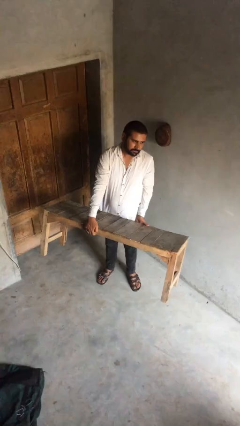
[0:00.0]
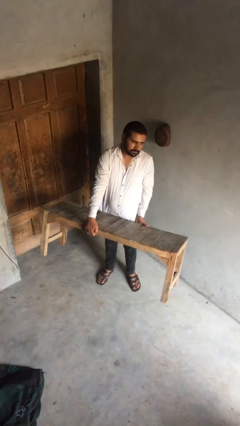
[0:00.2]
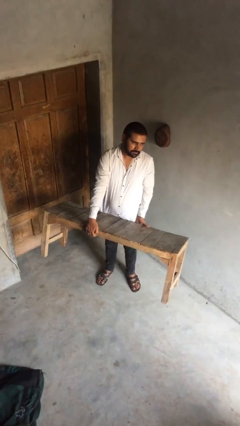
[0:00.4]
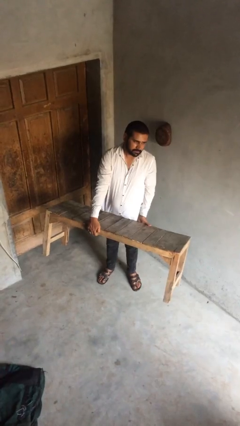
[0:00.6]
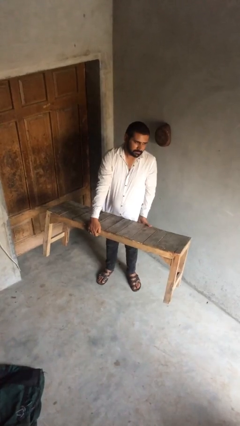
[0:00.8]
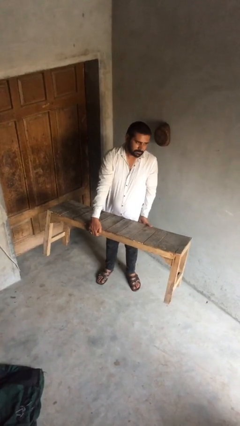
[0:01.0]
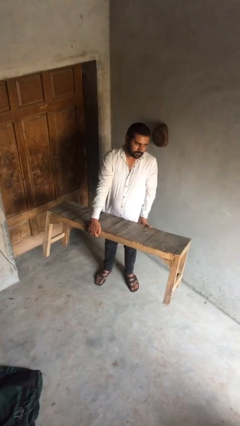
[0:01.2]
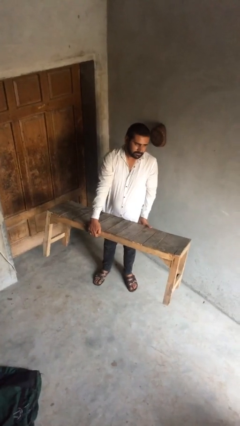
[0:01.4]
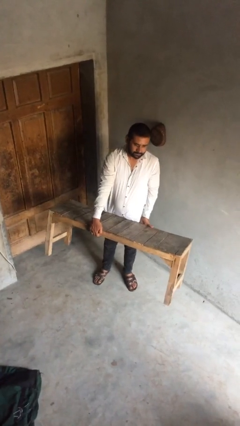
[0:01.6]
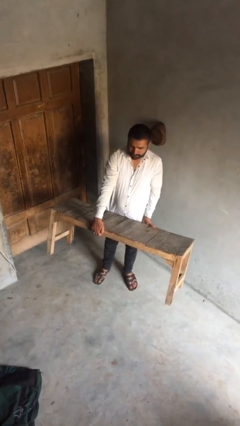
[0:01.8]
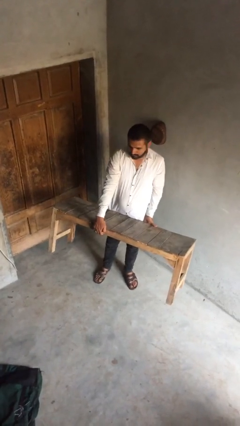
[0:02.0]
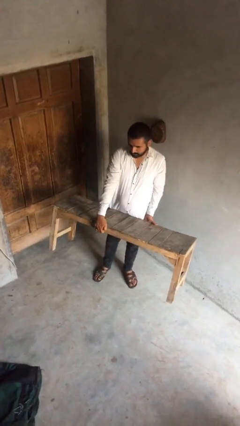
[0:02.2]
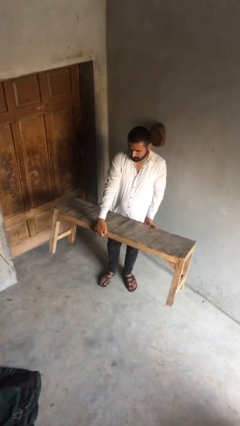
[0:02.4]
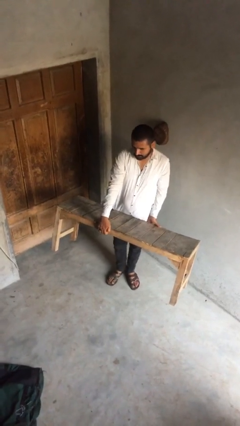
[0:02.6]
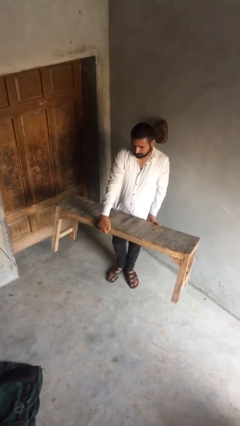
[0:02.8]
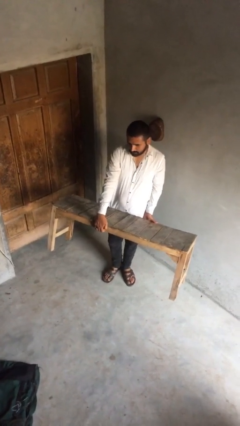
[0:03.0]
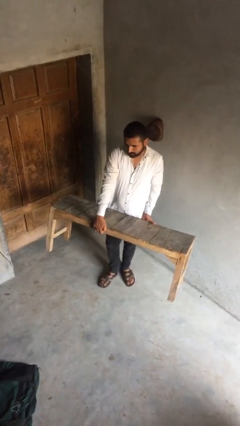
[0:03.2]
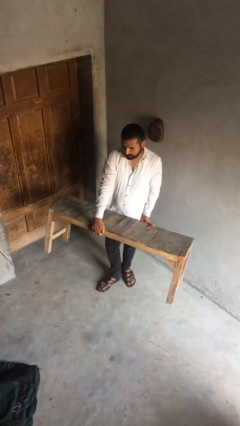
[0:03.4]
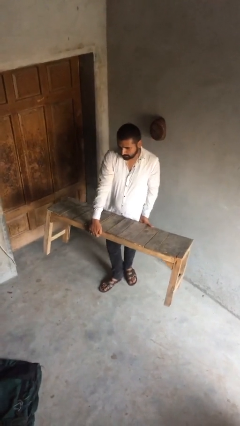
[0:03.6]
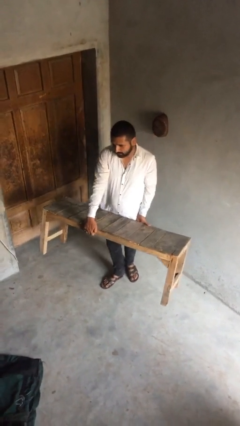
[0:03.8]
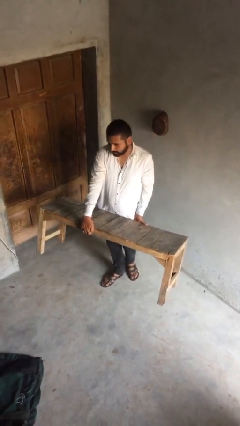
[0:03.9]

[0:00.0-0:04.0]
person carries heavy object

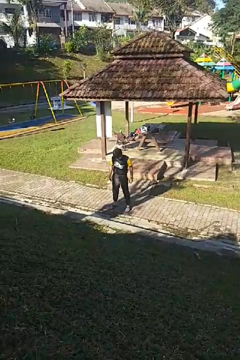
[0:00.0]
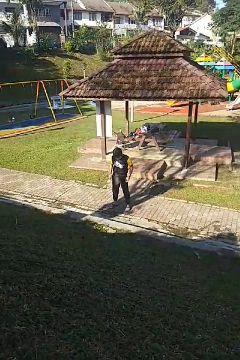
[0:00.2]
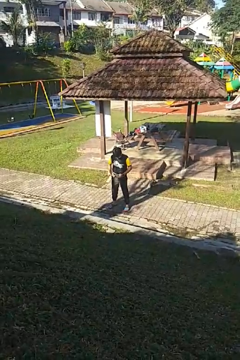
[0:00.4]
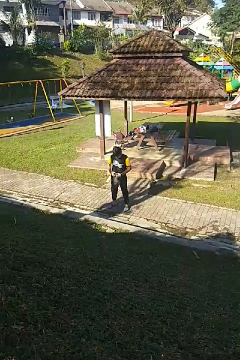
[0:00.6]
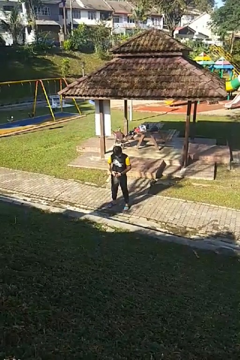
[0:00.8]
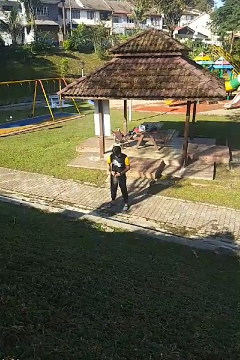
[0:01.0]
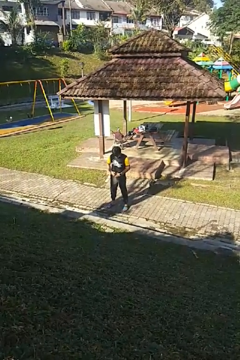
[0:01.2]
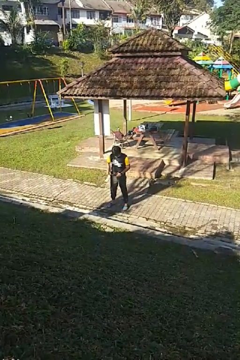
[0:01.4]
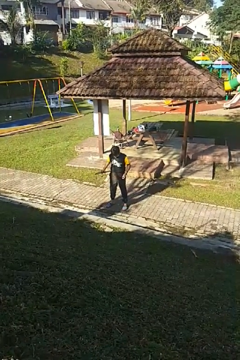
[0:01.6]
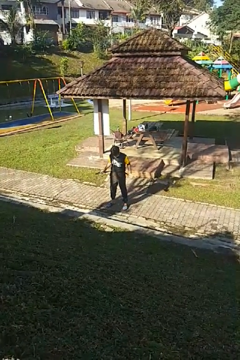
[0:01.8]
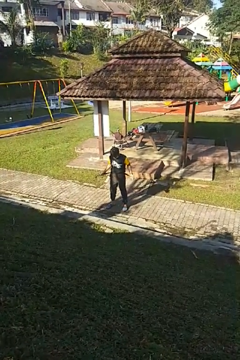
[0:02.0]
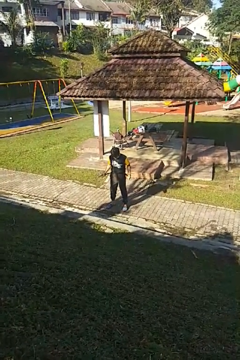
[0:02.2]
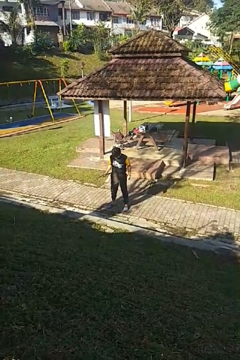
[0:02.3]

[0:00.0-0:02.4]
person takes off belt

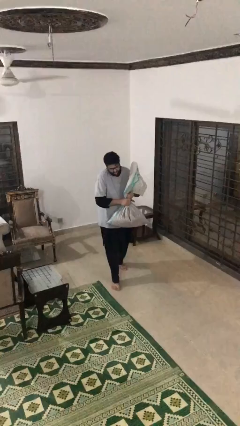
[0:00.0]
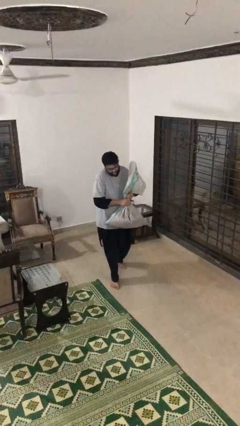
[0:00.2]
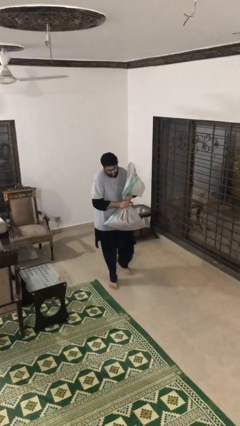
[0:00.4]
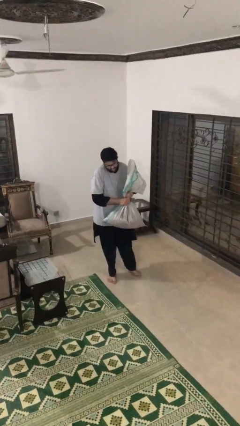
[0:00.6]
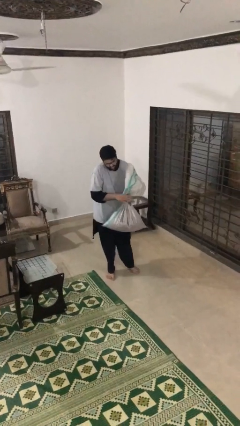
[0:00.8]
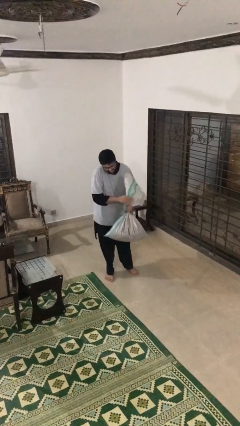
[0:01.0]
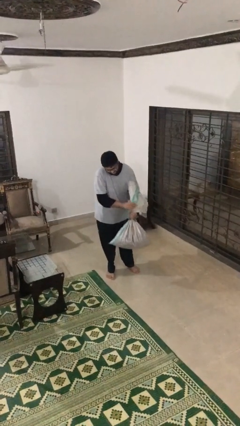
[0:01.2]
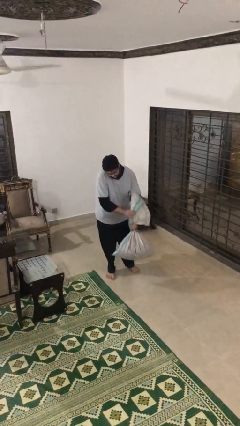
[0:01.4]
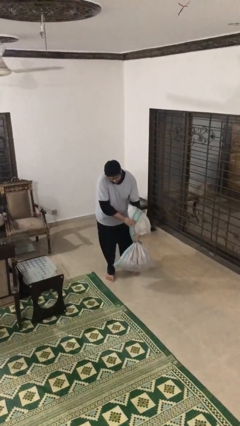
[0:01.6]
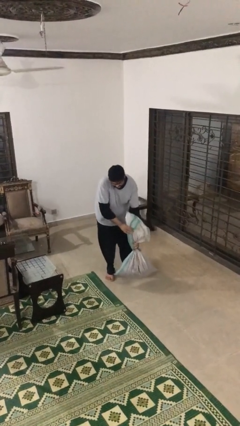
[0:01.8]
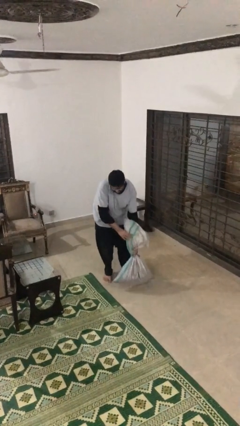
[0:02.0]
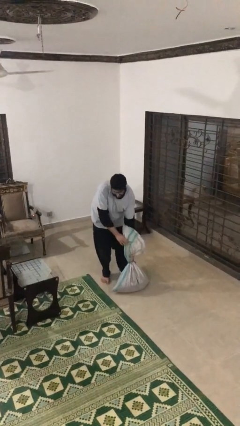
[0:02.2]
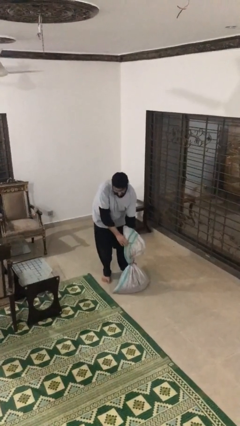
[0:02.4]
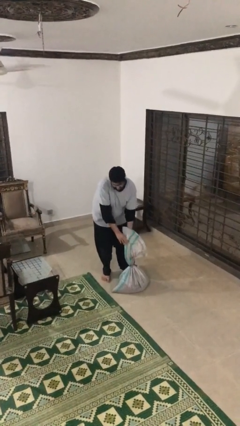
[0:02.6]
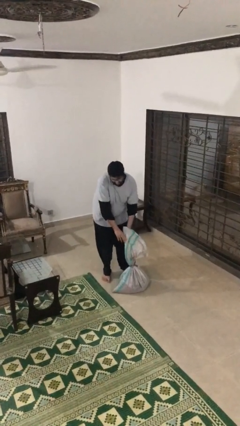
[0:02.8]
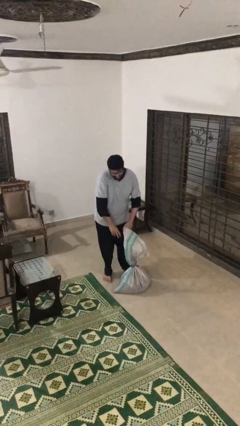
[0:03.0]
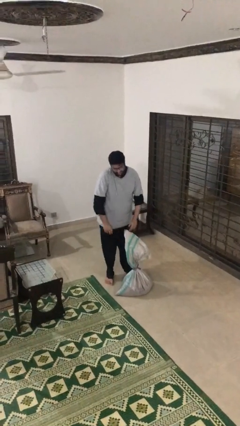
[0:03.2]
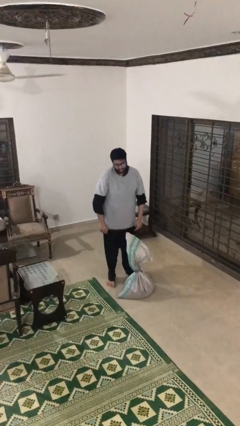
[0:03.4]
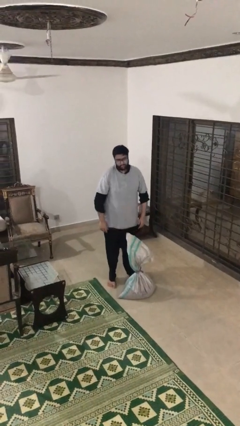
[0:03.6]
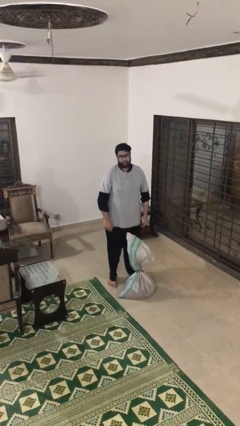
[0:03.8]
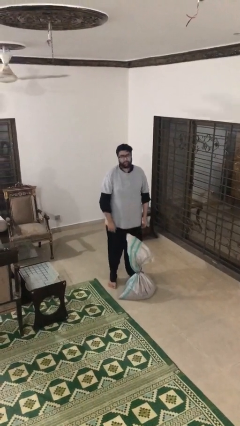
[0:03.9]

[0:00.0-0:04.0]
person puts down object on floor

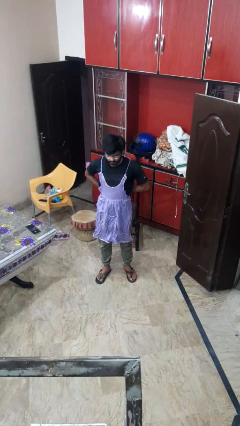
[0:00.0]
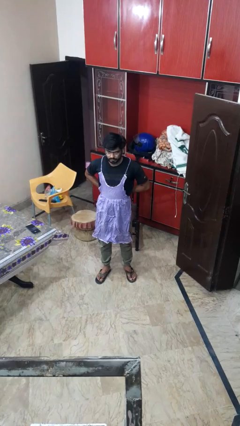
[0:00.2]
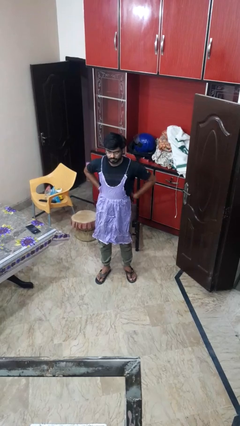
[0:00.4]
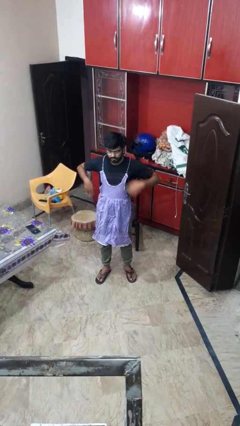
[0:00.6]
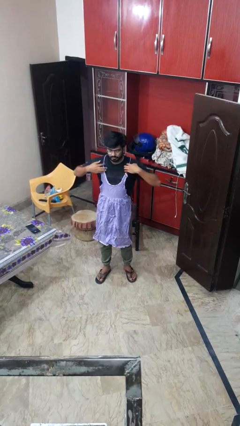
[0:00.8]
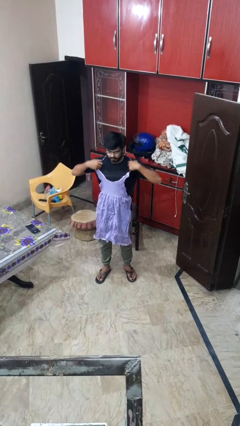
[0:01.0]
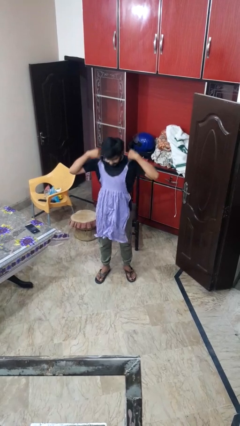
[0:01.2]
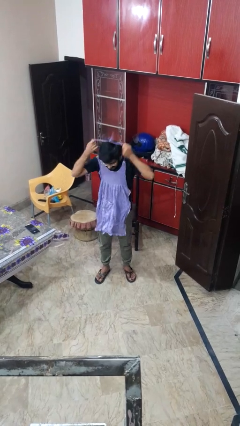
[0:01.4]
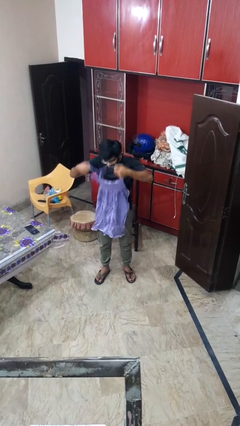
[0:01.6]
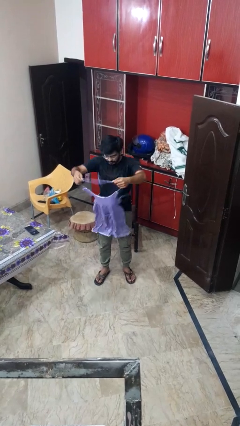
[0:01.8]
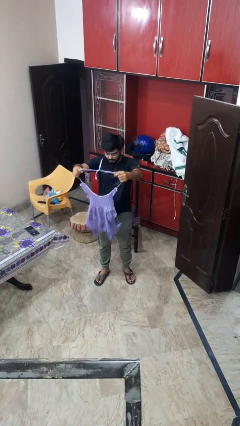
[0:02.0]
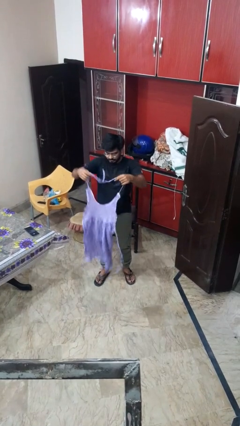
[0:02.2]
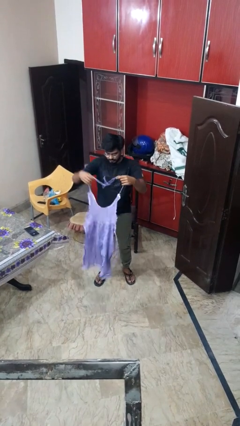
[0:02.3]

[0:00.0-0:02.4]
person takes off apron

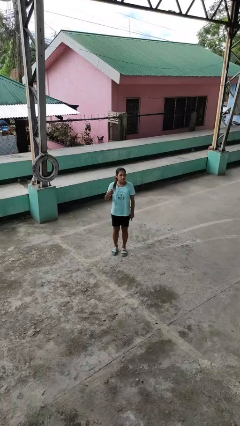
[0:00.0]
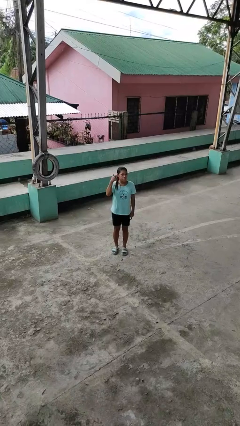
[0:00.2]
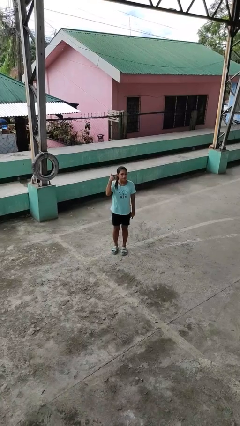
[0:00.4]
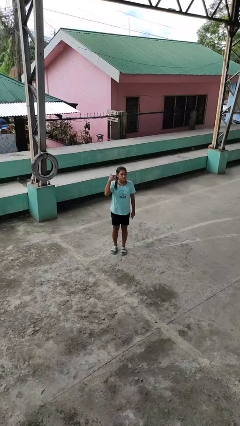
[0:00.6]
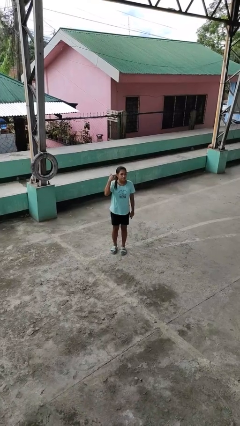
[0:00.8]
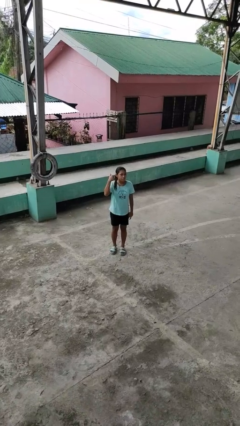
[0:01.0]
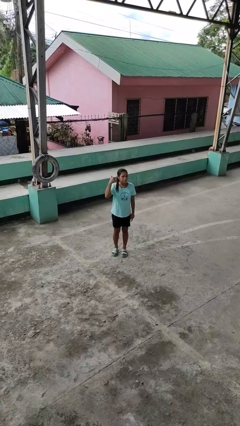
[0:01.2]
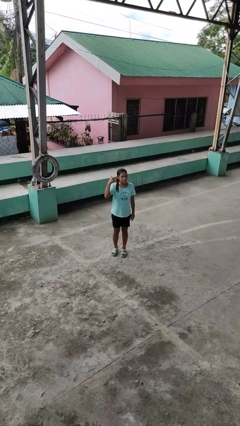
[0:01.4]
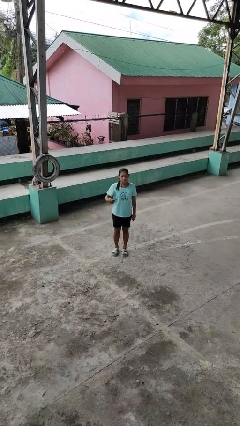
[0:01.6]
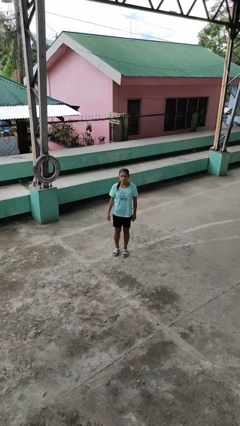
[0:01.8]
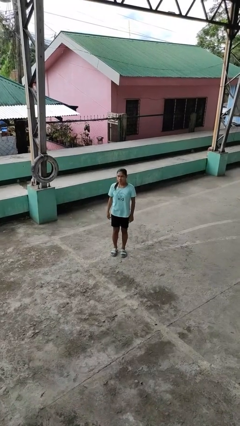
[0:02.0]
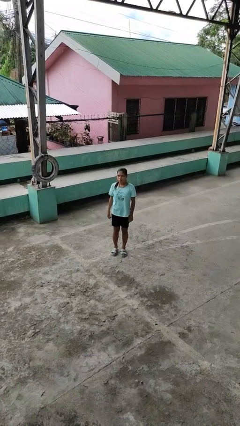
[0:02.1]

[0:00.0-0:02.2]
person gestures listen closely

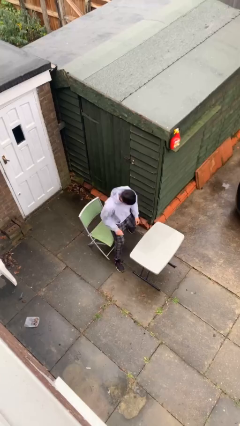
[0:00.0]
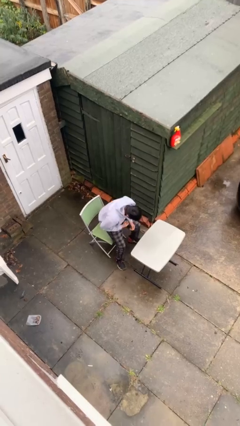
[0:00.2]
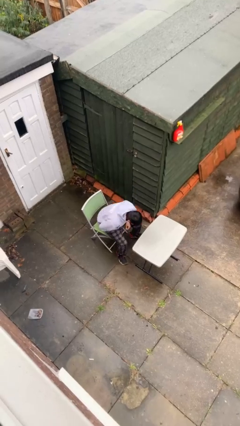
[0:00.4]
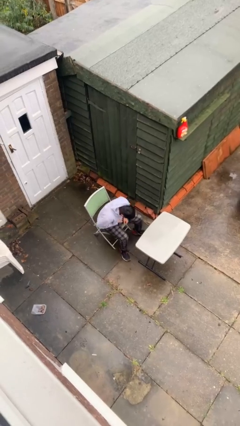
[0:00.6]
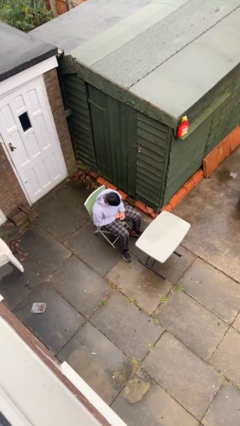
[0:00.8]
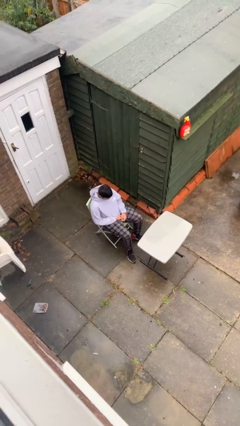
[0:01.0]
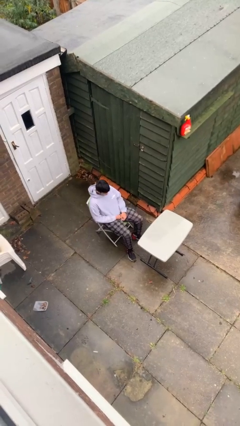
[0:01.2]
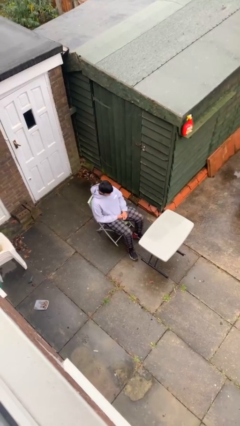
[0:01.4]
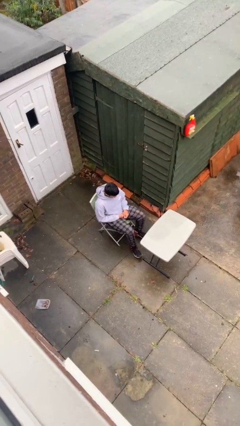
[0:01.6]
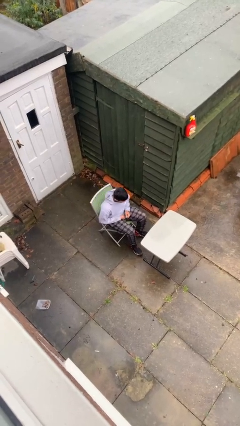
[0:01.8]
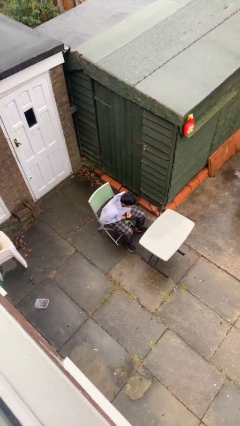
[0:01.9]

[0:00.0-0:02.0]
person sits down

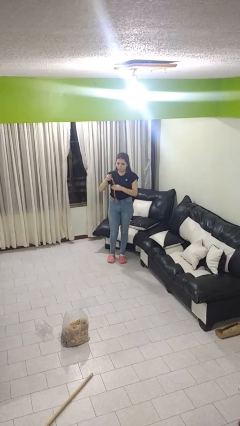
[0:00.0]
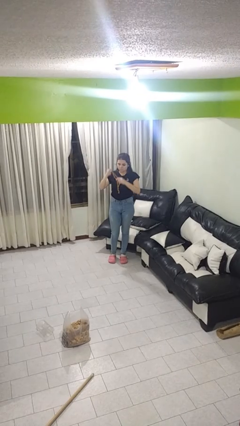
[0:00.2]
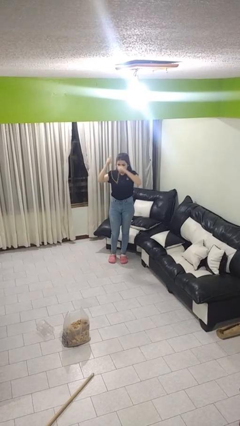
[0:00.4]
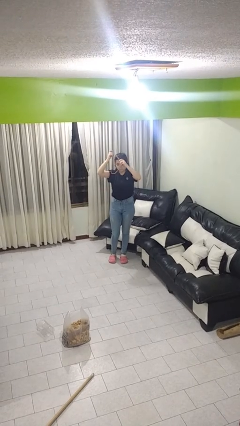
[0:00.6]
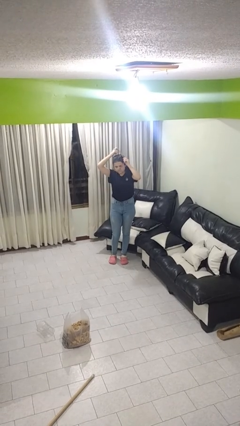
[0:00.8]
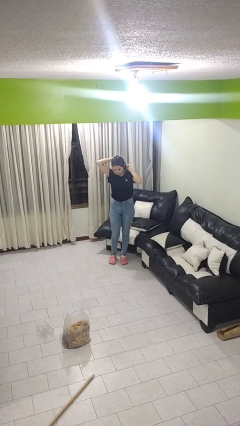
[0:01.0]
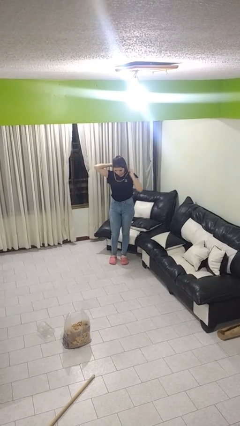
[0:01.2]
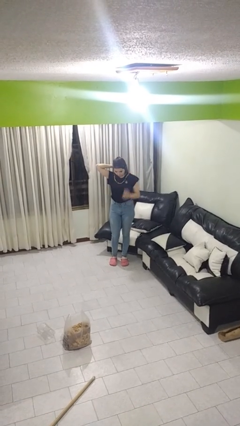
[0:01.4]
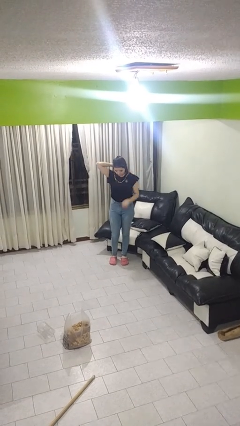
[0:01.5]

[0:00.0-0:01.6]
person puts on necklace
